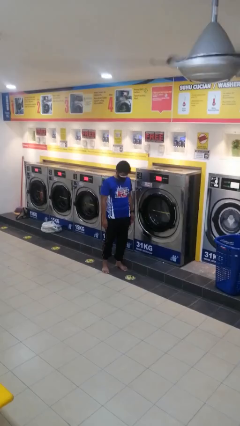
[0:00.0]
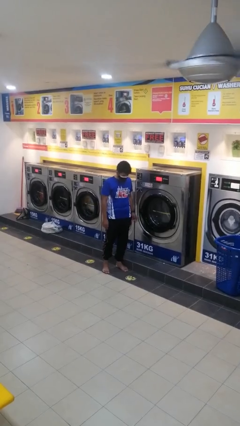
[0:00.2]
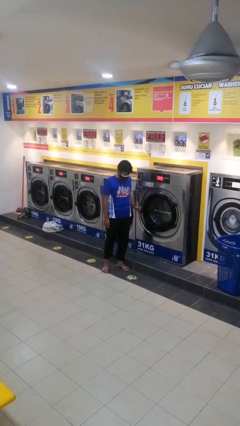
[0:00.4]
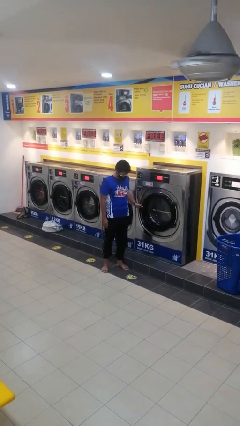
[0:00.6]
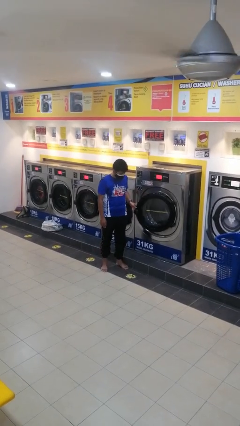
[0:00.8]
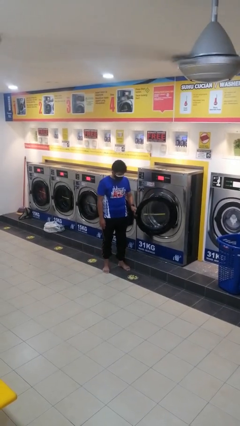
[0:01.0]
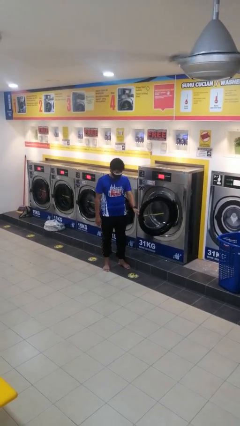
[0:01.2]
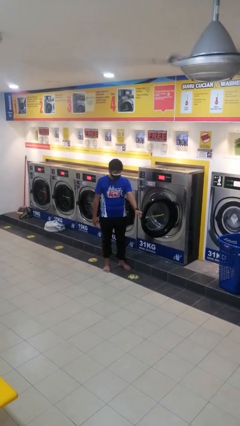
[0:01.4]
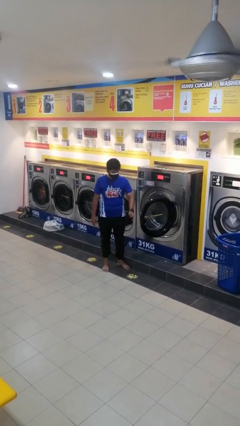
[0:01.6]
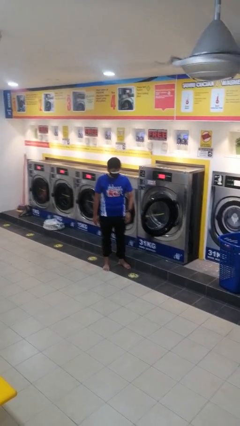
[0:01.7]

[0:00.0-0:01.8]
person opens clothes washer

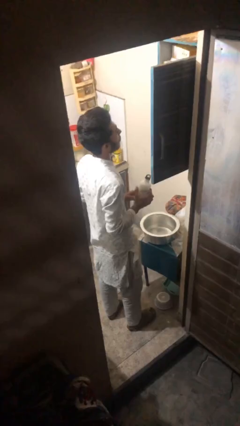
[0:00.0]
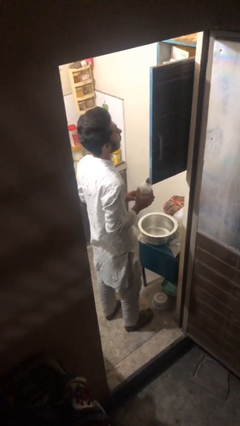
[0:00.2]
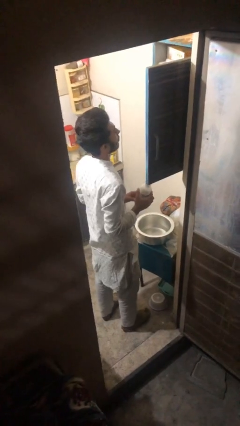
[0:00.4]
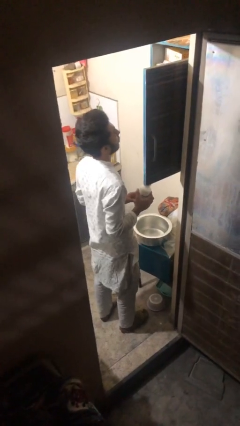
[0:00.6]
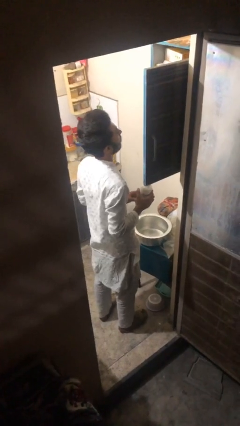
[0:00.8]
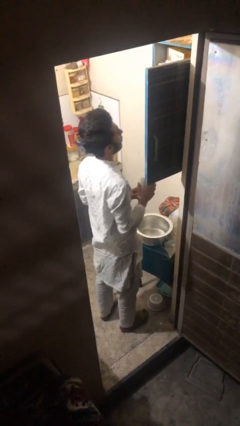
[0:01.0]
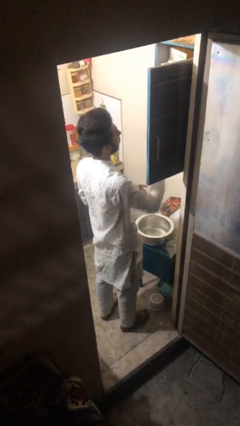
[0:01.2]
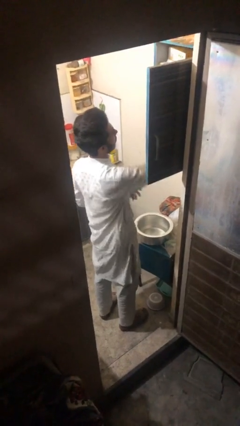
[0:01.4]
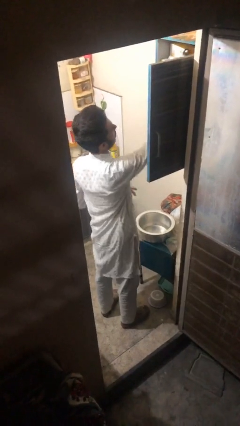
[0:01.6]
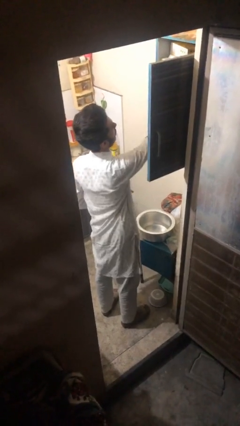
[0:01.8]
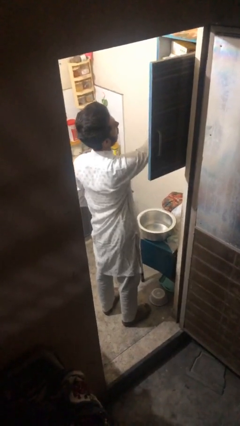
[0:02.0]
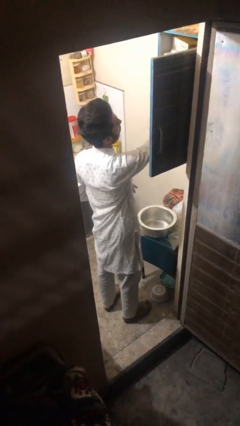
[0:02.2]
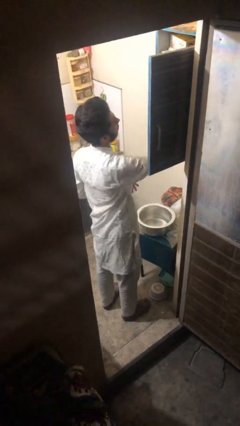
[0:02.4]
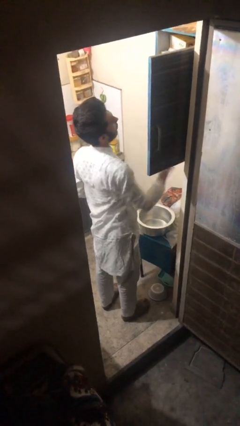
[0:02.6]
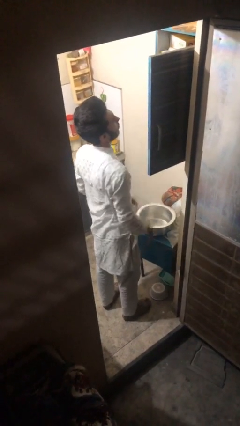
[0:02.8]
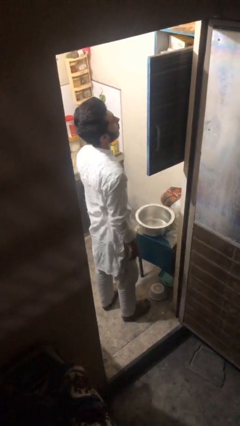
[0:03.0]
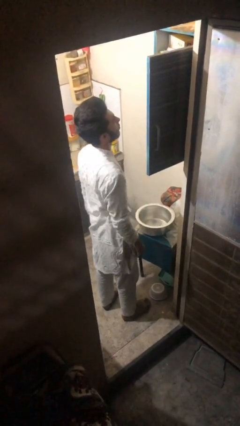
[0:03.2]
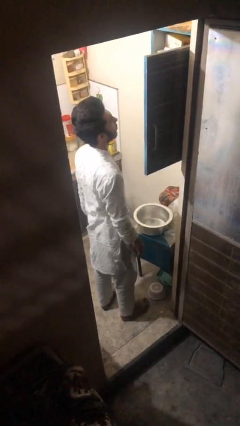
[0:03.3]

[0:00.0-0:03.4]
person puts object in cabinet

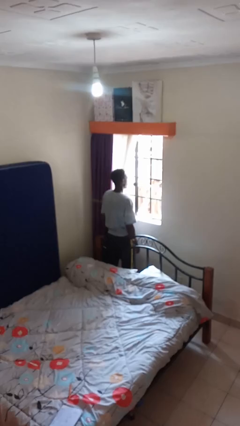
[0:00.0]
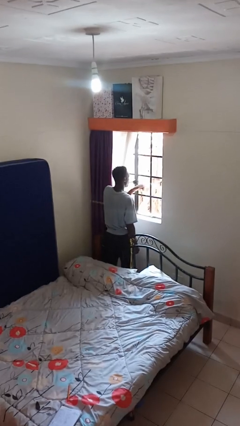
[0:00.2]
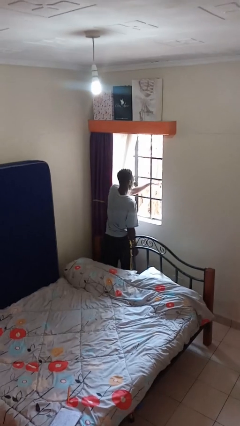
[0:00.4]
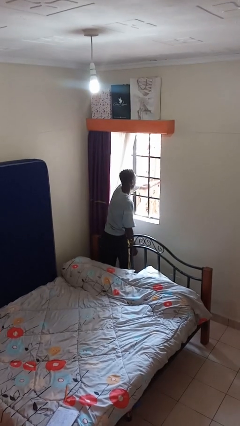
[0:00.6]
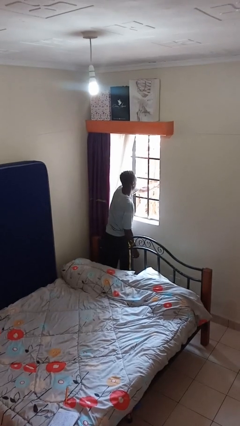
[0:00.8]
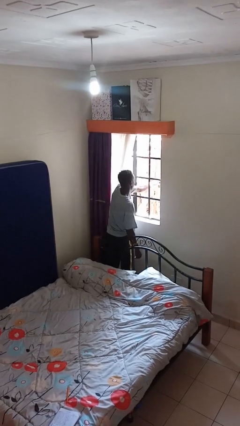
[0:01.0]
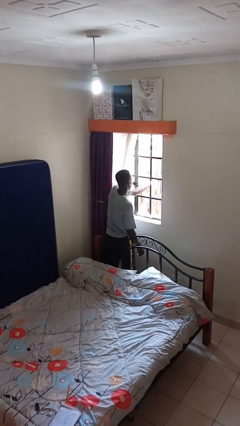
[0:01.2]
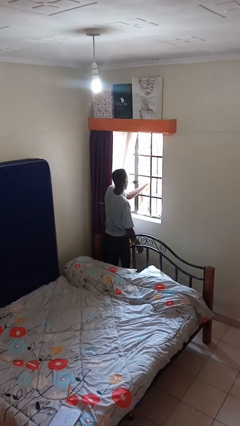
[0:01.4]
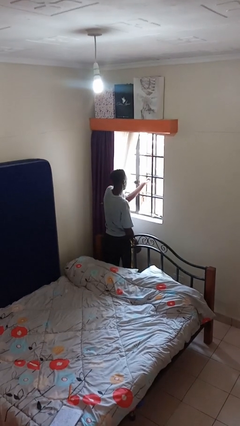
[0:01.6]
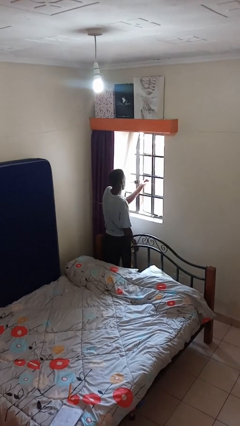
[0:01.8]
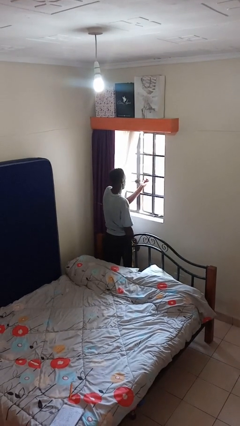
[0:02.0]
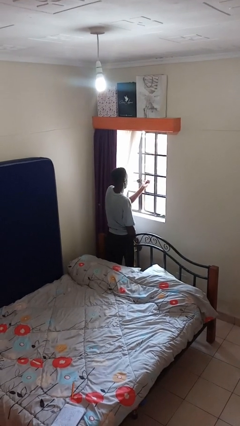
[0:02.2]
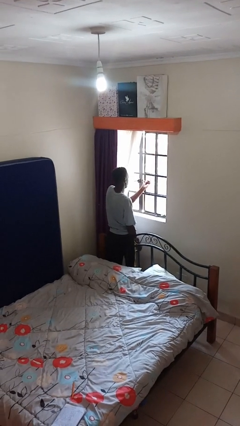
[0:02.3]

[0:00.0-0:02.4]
person closes home window

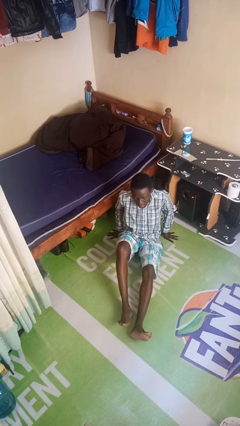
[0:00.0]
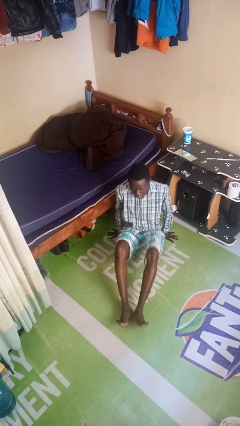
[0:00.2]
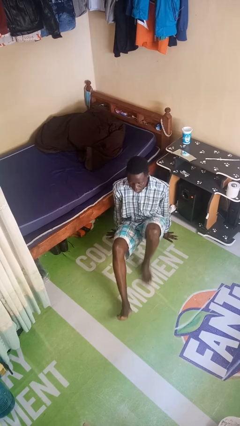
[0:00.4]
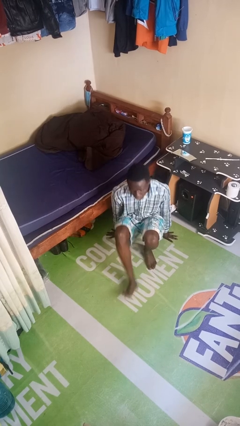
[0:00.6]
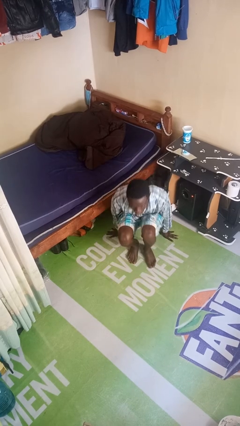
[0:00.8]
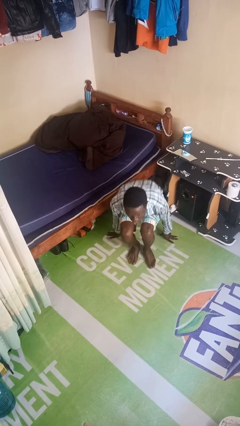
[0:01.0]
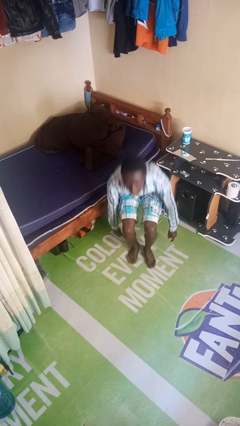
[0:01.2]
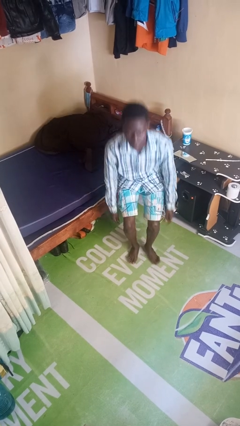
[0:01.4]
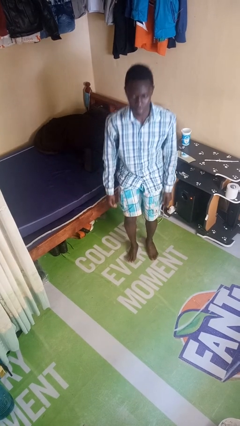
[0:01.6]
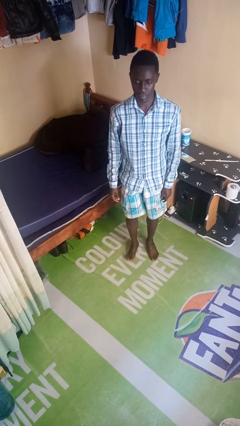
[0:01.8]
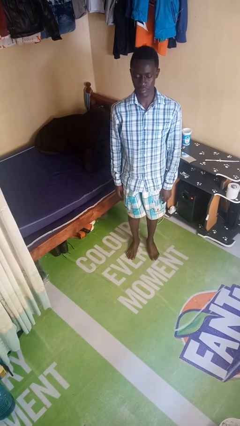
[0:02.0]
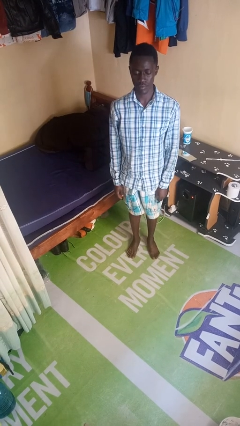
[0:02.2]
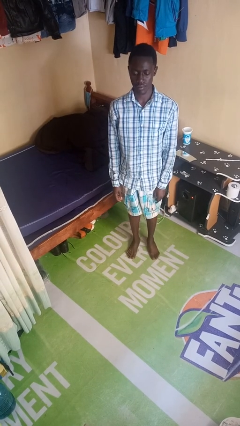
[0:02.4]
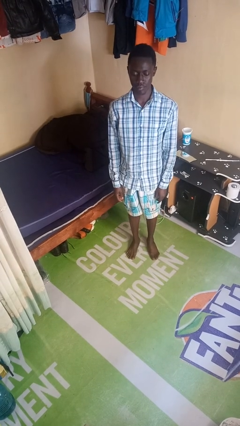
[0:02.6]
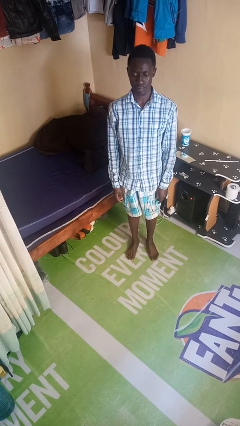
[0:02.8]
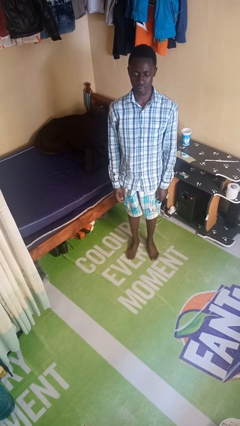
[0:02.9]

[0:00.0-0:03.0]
person stands up from floor

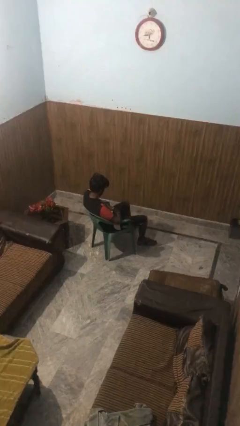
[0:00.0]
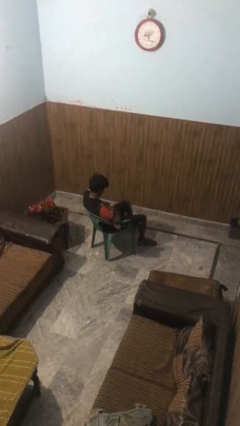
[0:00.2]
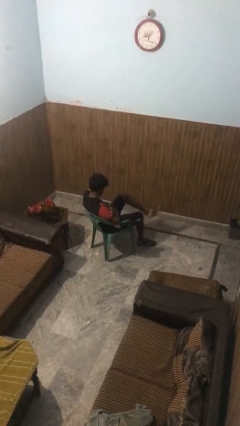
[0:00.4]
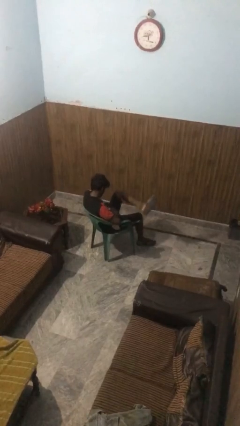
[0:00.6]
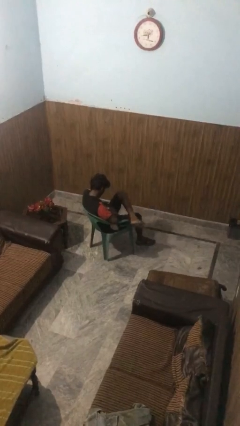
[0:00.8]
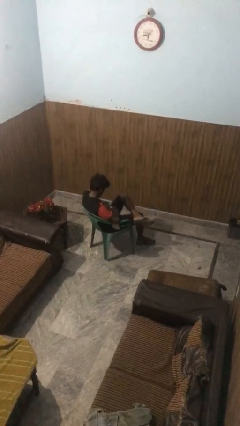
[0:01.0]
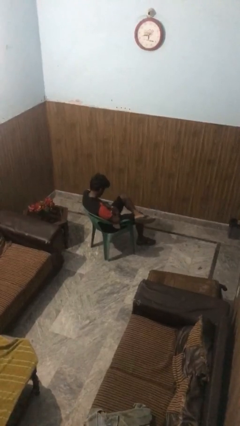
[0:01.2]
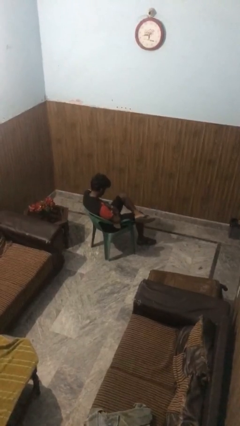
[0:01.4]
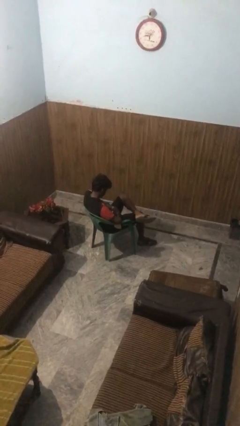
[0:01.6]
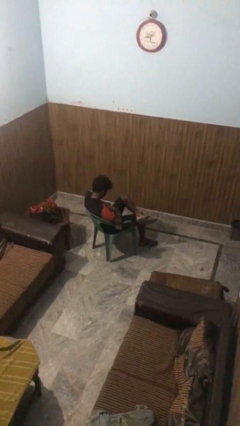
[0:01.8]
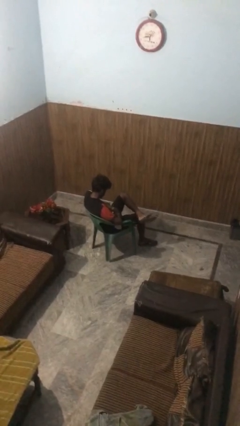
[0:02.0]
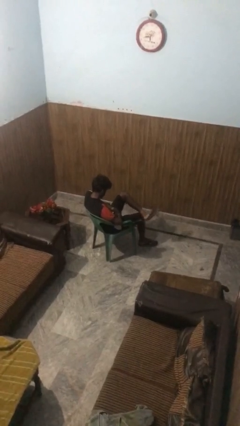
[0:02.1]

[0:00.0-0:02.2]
person crosses legs

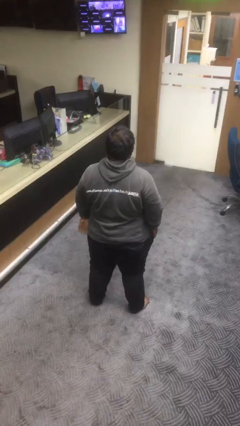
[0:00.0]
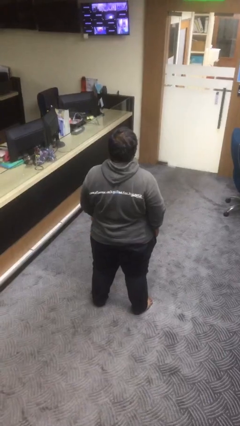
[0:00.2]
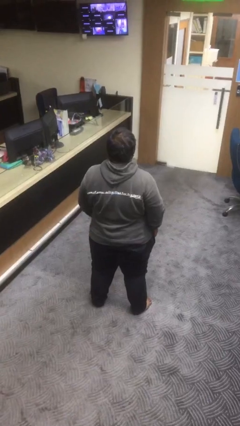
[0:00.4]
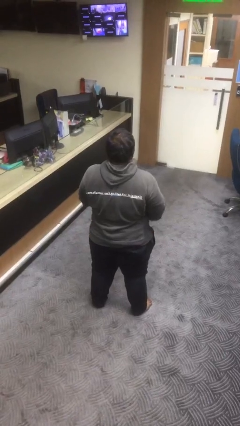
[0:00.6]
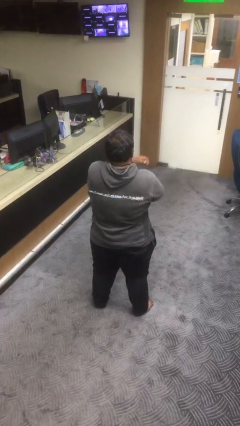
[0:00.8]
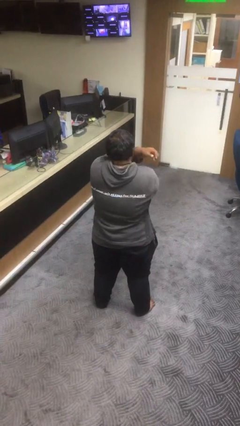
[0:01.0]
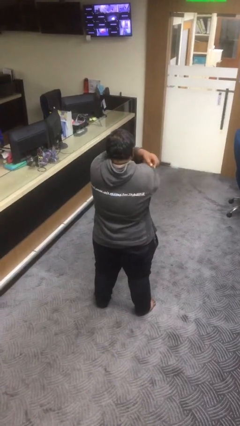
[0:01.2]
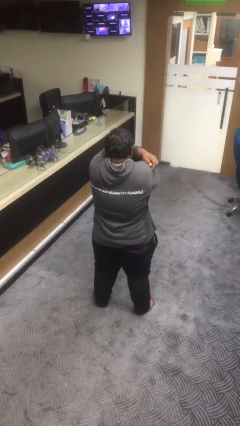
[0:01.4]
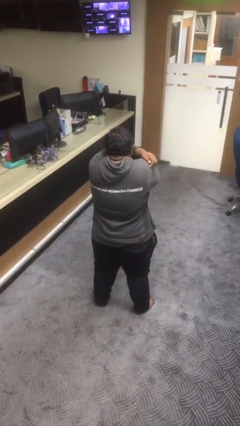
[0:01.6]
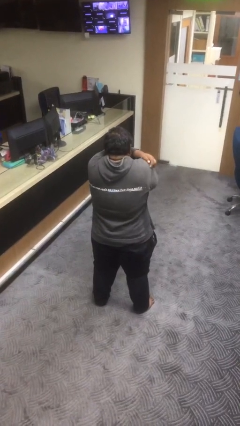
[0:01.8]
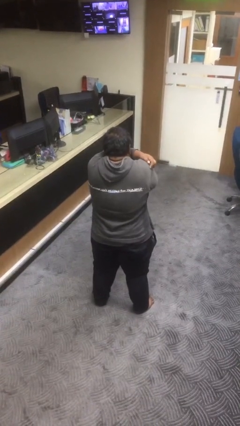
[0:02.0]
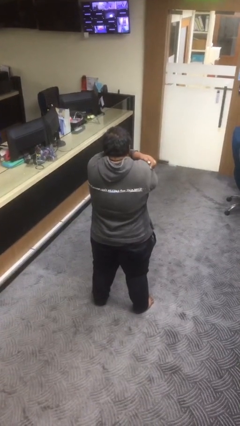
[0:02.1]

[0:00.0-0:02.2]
person sneezes into arm

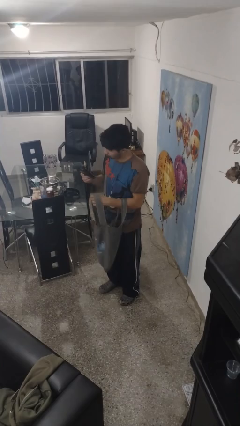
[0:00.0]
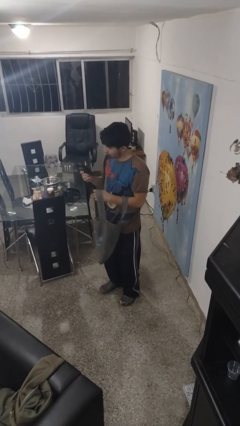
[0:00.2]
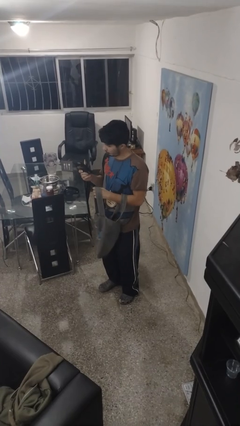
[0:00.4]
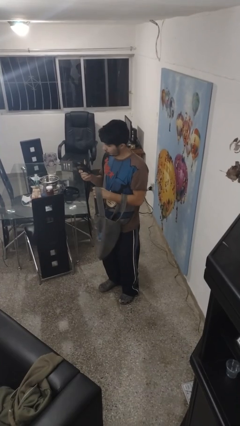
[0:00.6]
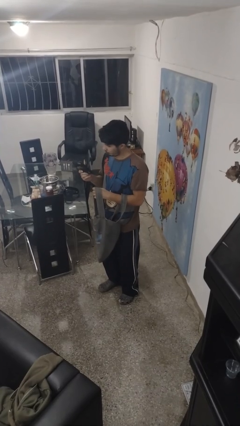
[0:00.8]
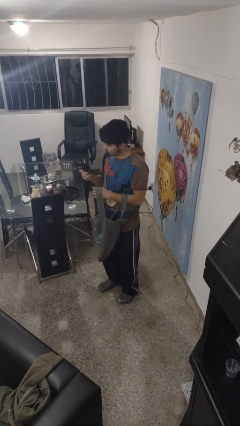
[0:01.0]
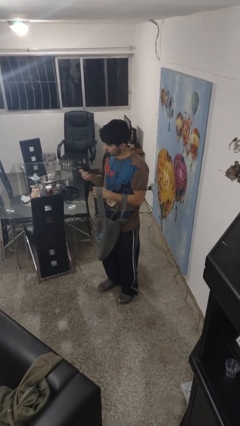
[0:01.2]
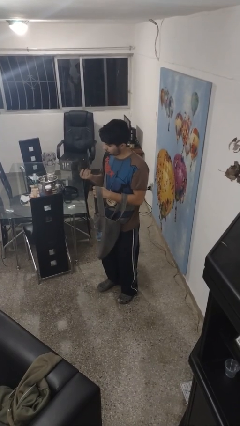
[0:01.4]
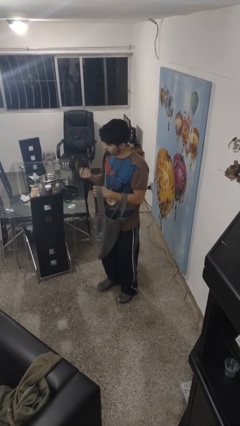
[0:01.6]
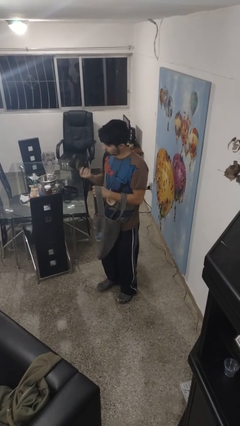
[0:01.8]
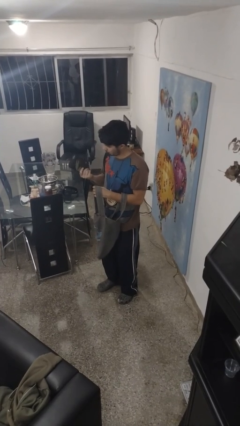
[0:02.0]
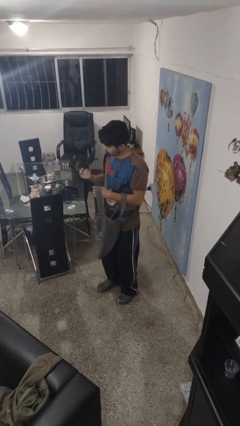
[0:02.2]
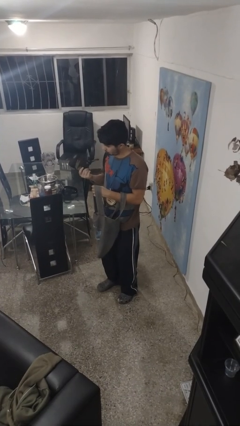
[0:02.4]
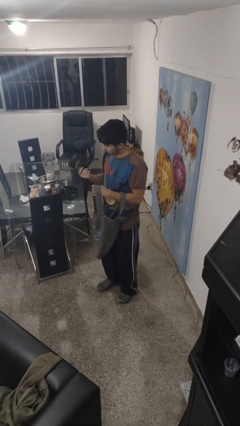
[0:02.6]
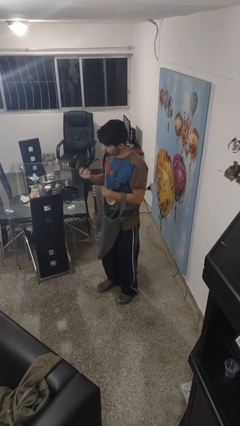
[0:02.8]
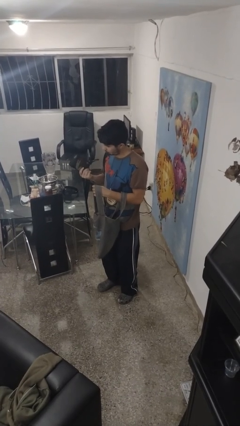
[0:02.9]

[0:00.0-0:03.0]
person takes object from purse
